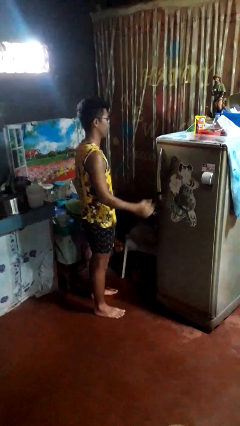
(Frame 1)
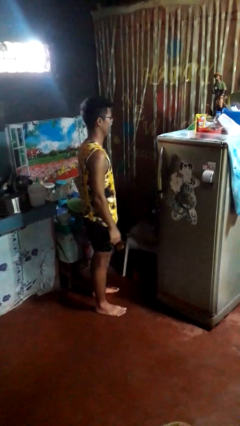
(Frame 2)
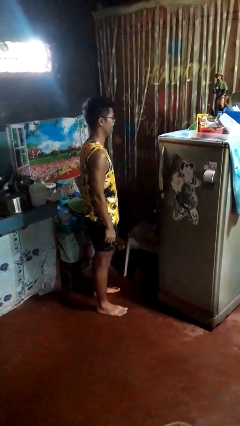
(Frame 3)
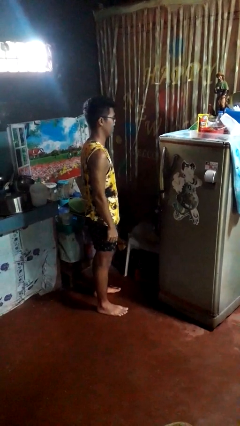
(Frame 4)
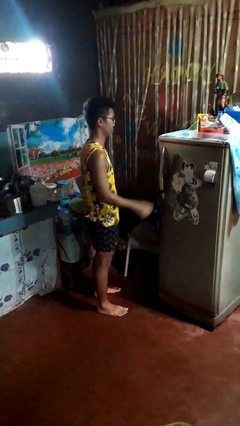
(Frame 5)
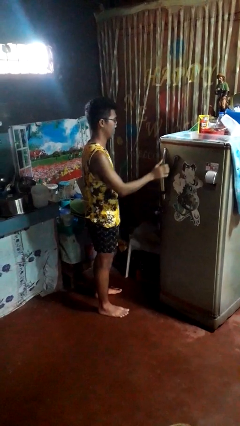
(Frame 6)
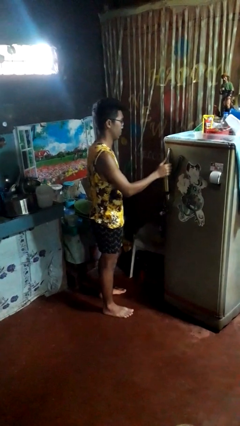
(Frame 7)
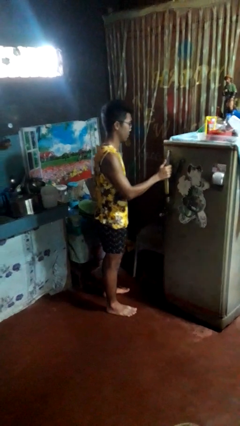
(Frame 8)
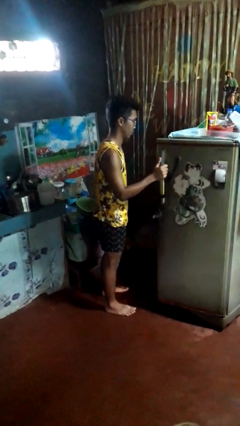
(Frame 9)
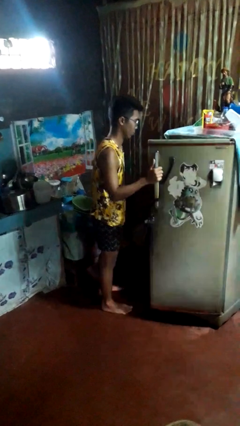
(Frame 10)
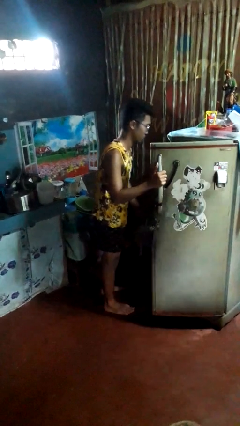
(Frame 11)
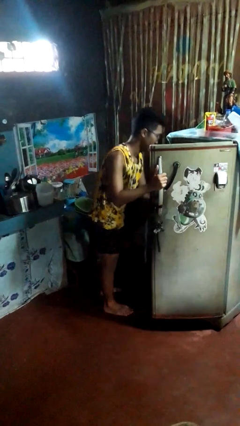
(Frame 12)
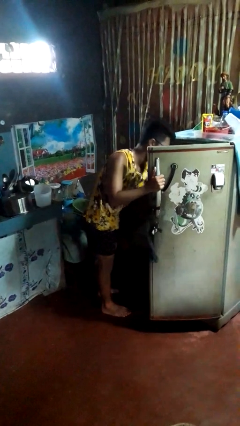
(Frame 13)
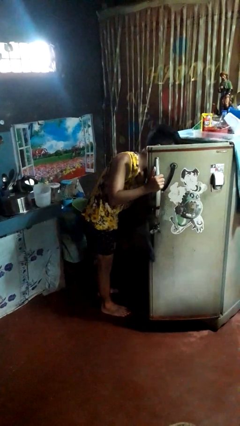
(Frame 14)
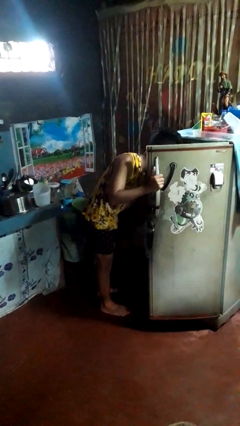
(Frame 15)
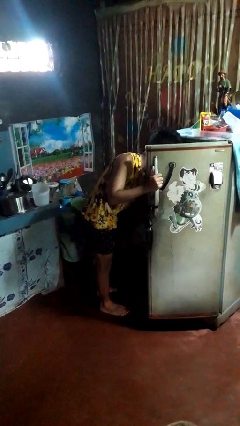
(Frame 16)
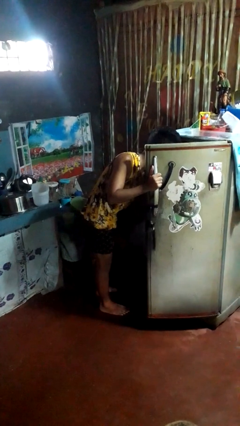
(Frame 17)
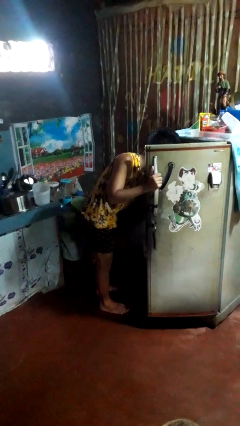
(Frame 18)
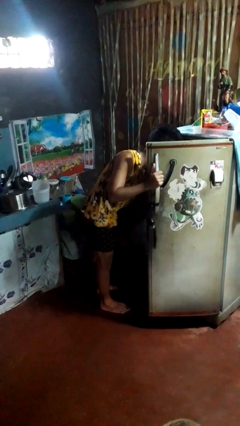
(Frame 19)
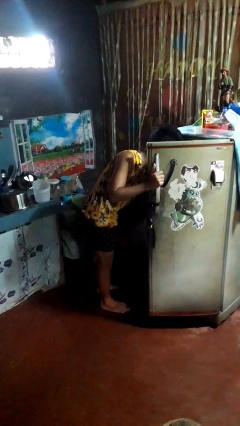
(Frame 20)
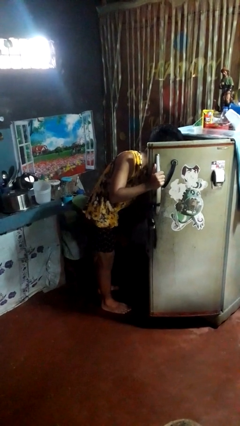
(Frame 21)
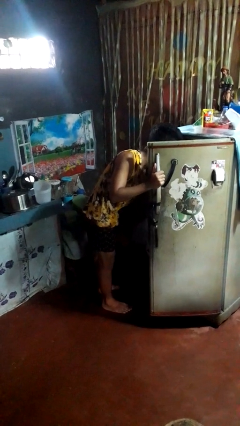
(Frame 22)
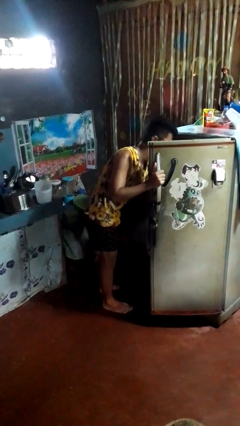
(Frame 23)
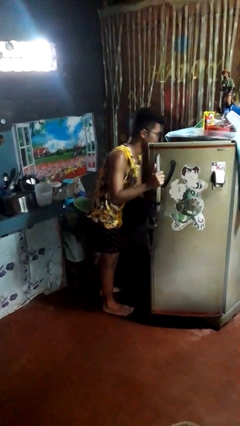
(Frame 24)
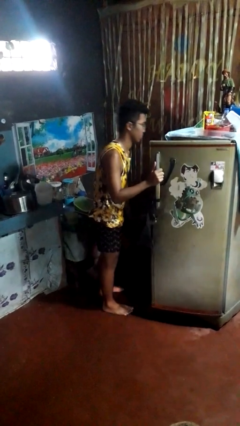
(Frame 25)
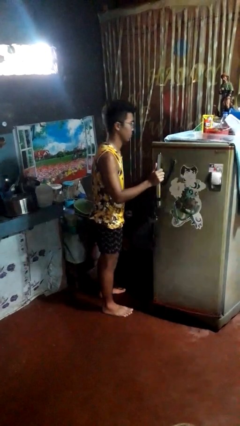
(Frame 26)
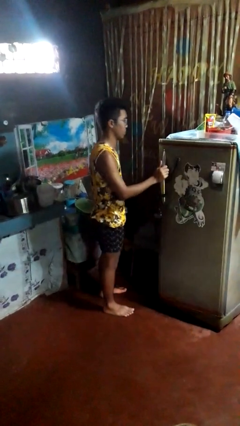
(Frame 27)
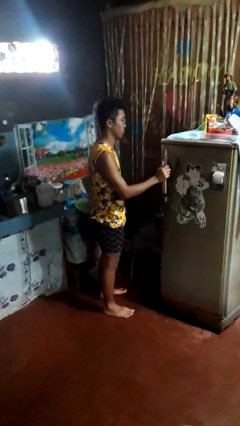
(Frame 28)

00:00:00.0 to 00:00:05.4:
person takes object from refrigerator

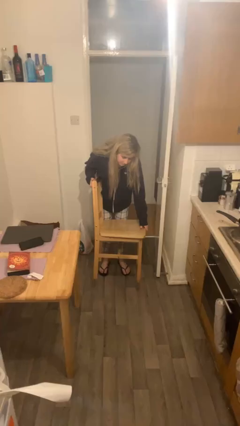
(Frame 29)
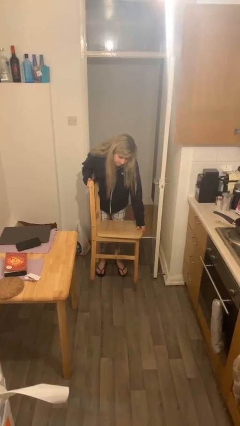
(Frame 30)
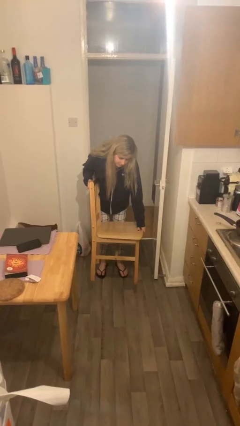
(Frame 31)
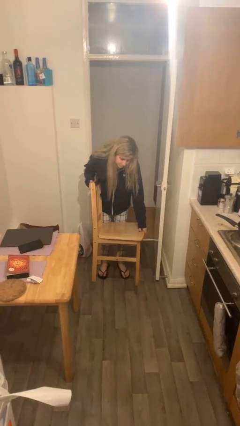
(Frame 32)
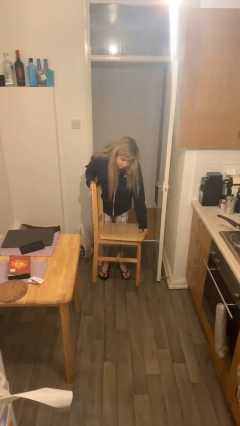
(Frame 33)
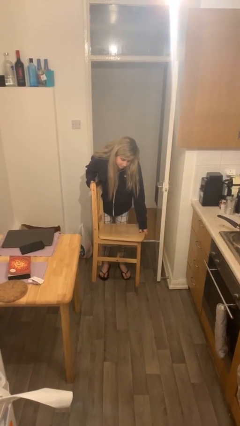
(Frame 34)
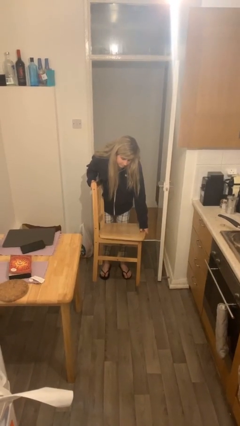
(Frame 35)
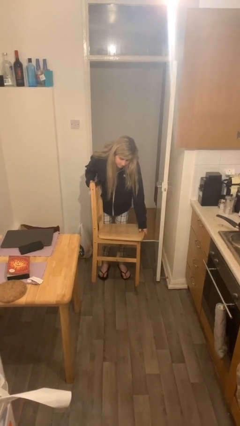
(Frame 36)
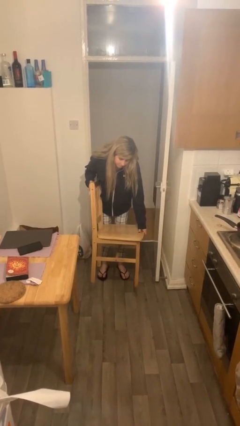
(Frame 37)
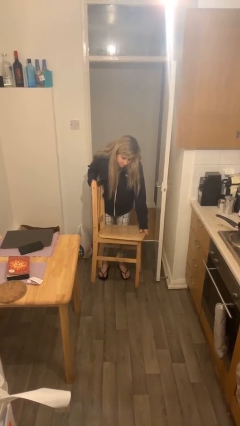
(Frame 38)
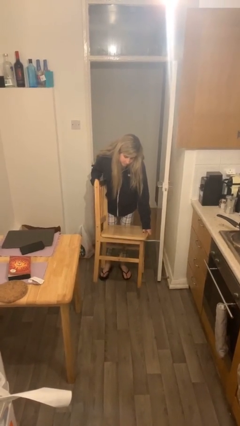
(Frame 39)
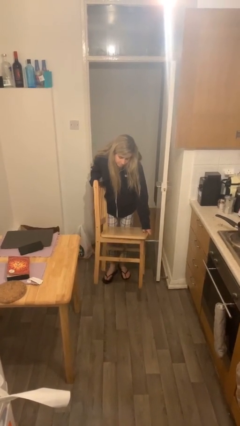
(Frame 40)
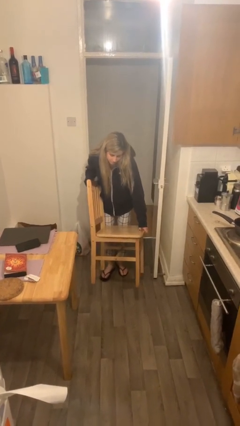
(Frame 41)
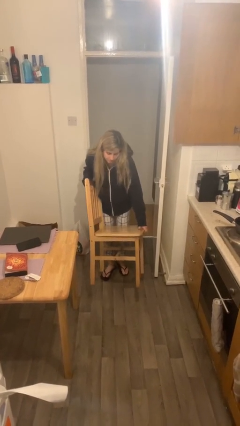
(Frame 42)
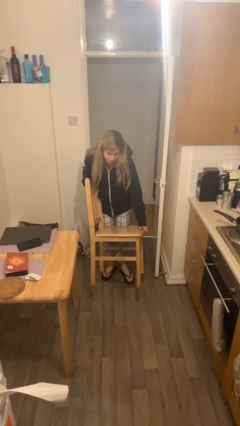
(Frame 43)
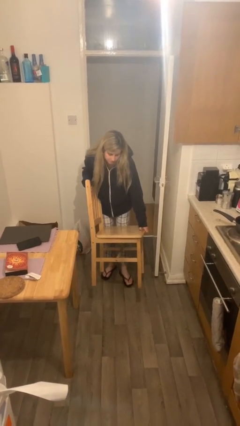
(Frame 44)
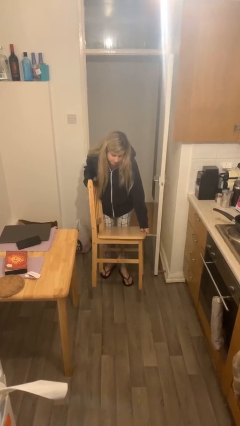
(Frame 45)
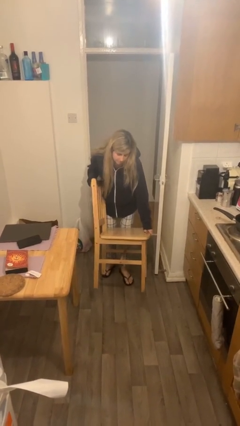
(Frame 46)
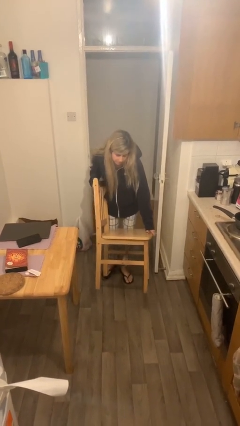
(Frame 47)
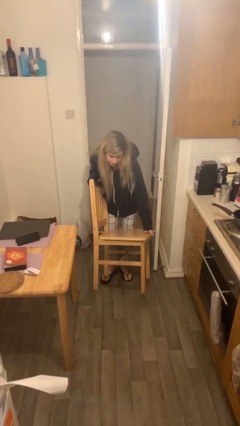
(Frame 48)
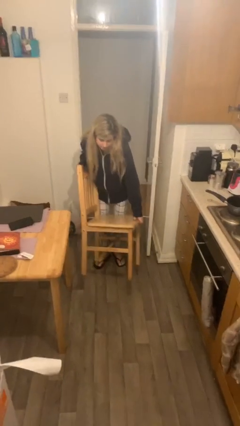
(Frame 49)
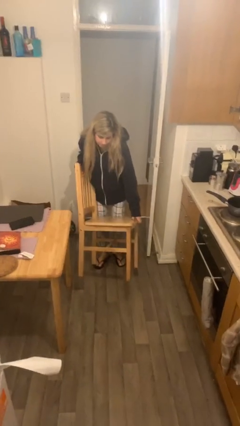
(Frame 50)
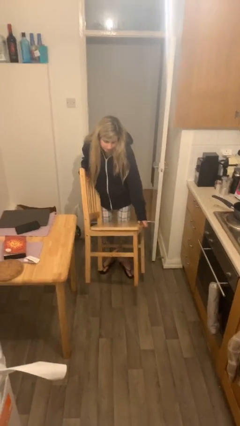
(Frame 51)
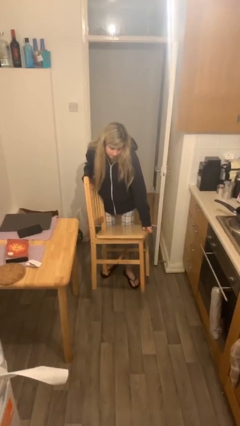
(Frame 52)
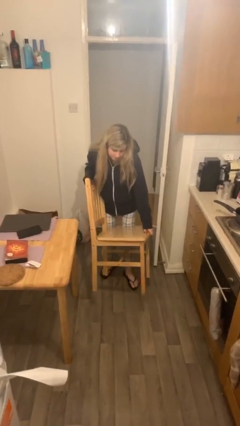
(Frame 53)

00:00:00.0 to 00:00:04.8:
person carries heavy object

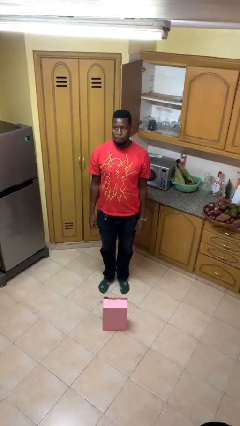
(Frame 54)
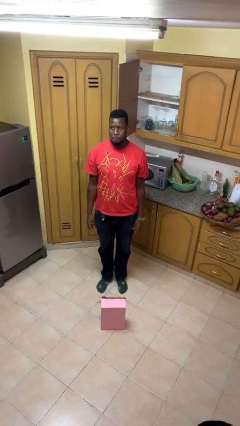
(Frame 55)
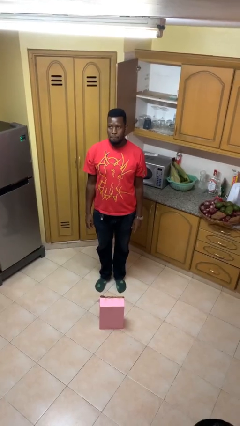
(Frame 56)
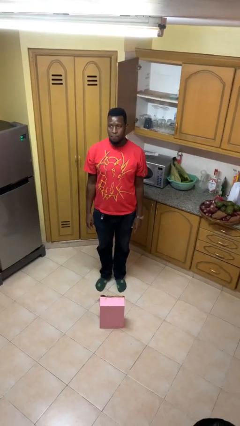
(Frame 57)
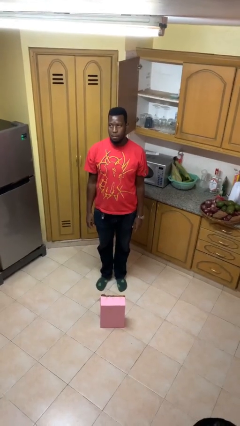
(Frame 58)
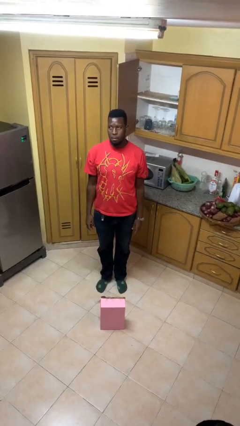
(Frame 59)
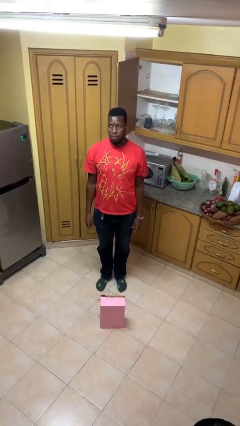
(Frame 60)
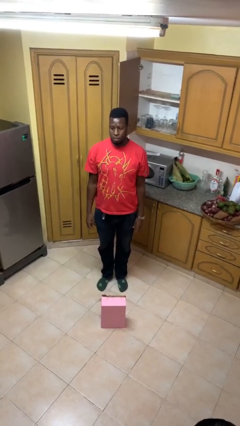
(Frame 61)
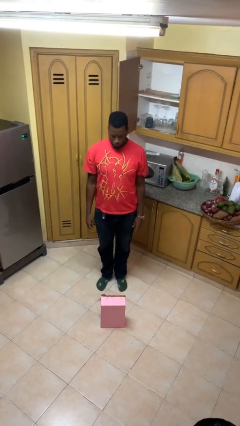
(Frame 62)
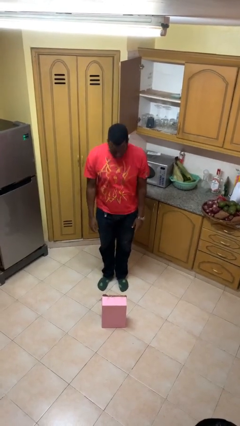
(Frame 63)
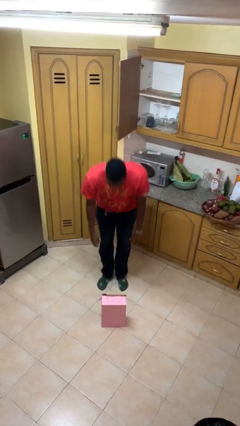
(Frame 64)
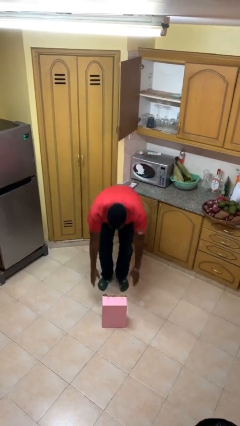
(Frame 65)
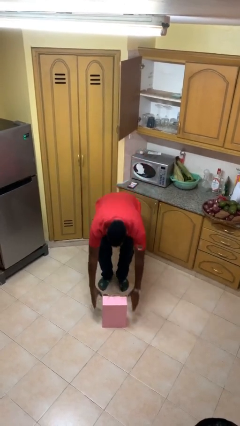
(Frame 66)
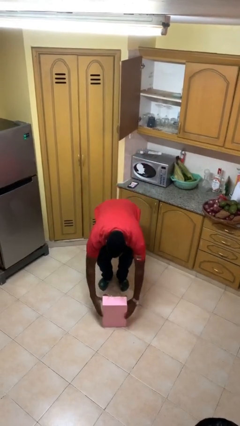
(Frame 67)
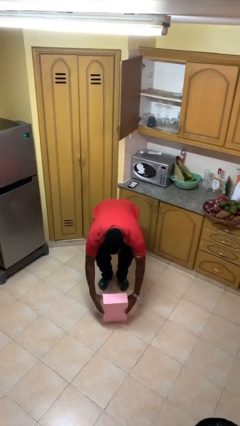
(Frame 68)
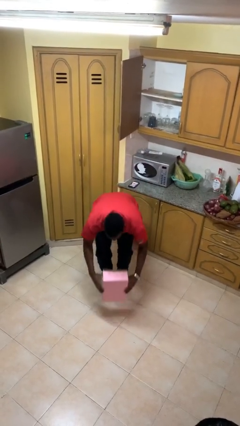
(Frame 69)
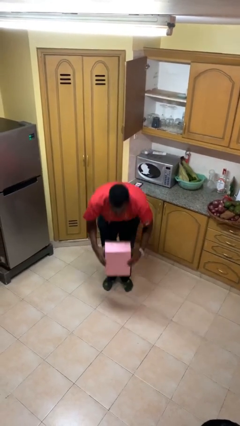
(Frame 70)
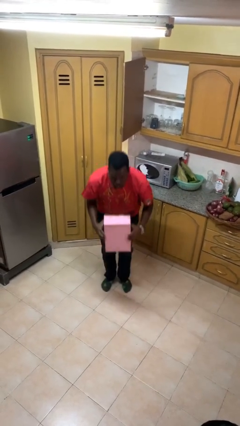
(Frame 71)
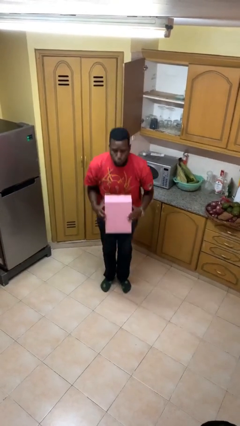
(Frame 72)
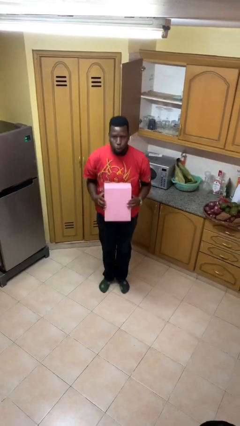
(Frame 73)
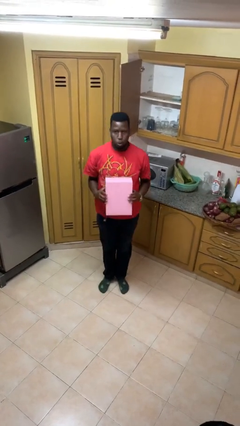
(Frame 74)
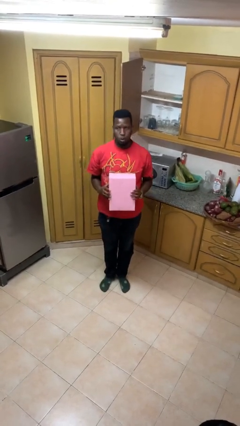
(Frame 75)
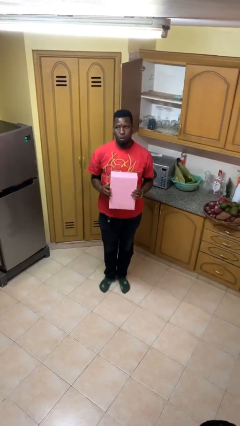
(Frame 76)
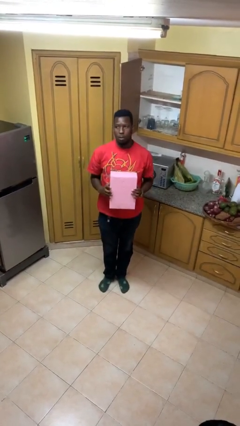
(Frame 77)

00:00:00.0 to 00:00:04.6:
person picks up object from floor

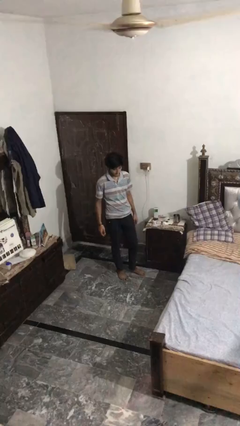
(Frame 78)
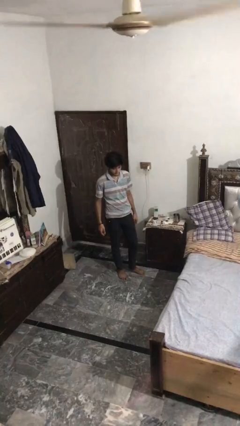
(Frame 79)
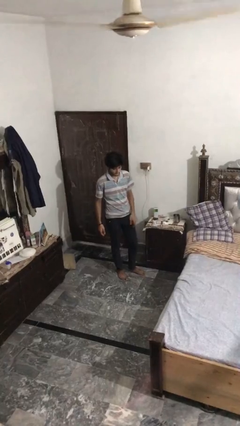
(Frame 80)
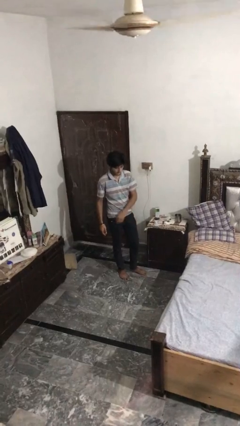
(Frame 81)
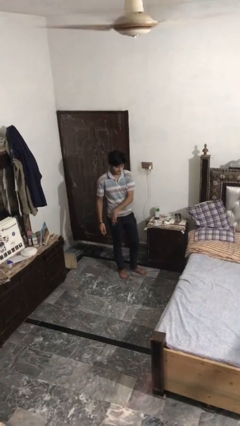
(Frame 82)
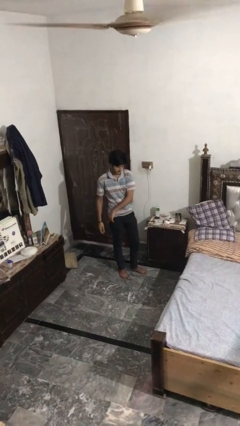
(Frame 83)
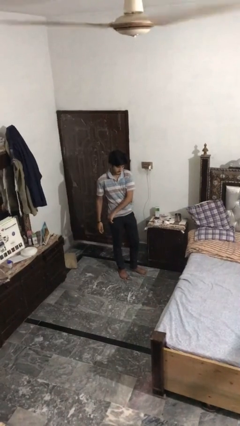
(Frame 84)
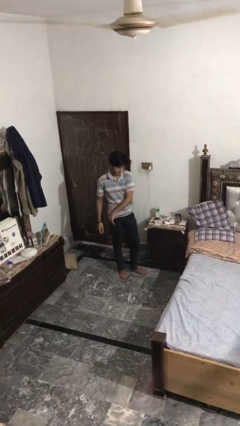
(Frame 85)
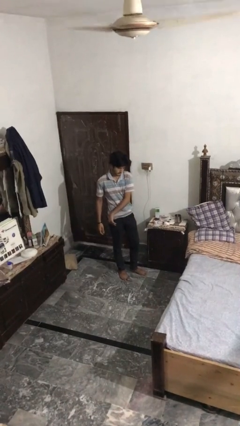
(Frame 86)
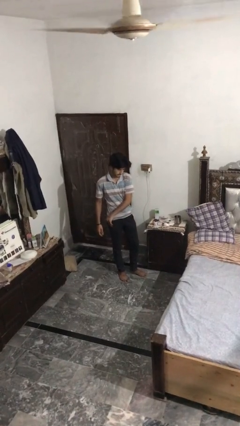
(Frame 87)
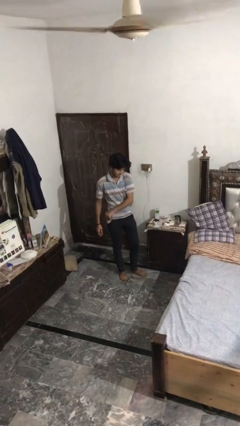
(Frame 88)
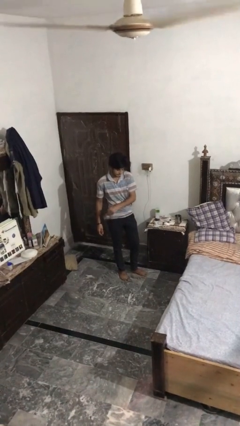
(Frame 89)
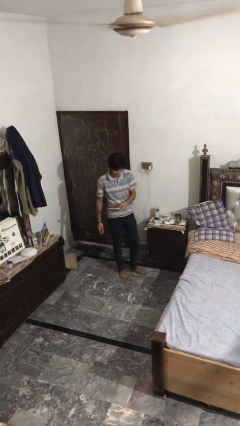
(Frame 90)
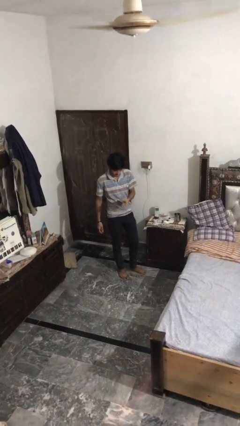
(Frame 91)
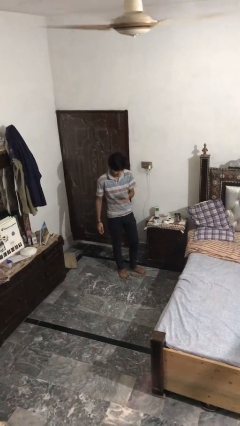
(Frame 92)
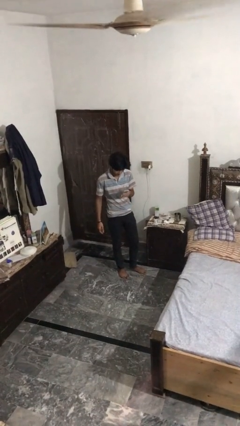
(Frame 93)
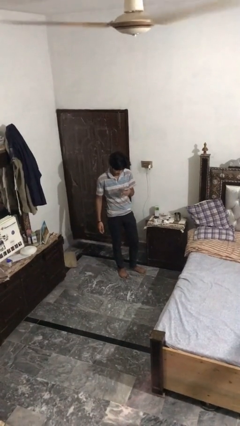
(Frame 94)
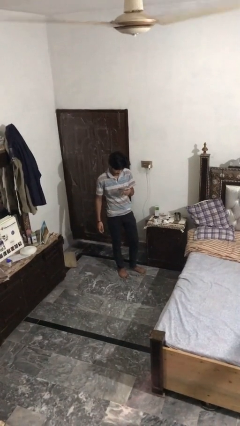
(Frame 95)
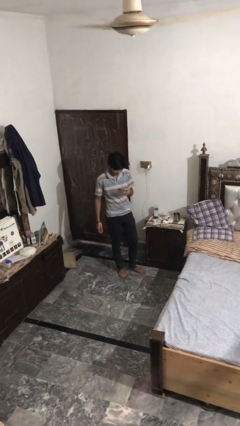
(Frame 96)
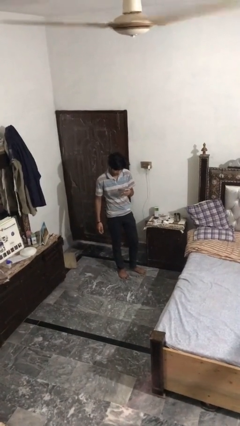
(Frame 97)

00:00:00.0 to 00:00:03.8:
person takes phone from pocket
